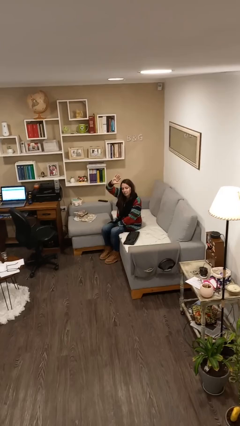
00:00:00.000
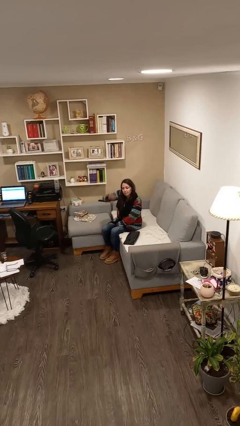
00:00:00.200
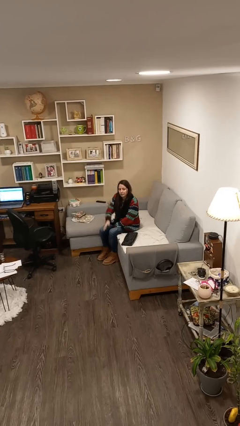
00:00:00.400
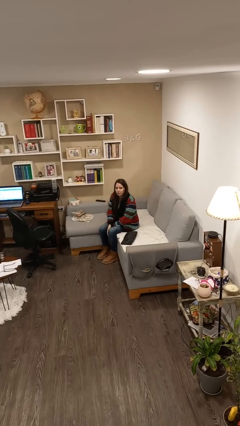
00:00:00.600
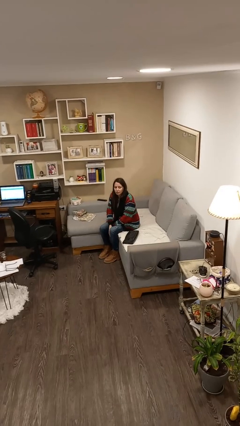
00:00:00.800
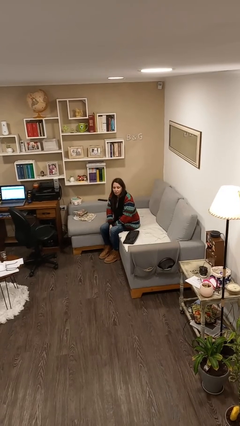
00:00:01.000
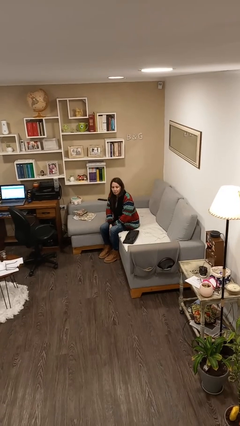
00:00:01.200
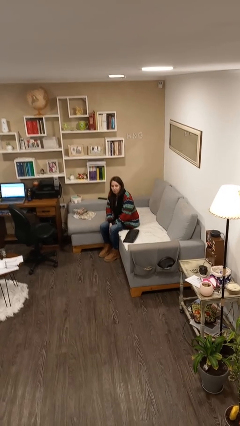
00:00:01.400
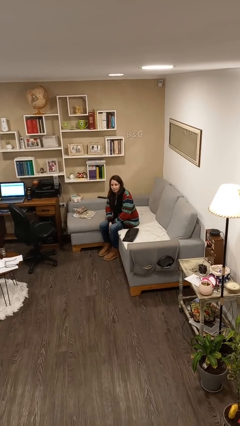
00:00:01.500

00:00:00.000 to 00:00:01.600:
person gestures lower hand

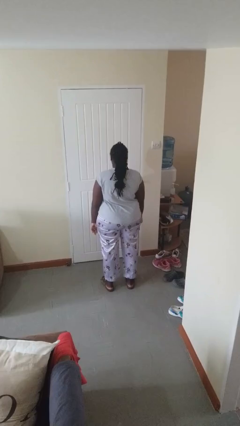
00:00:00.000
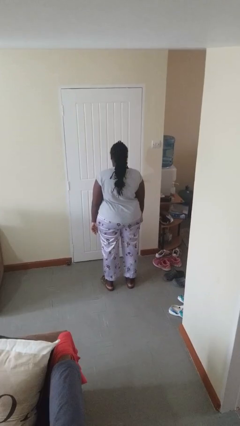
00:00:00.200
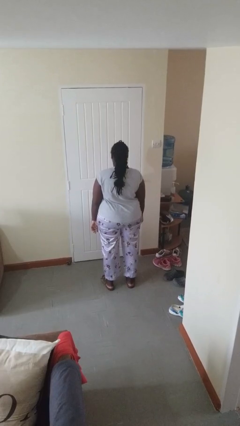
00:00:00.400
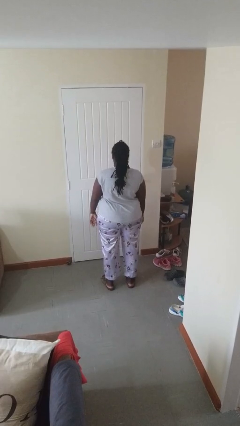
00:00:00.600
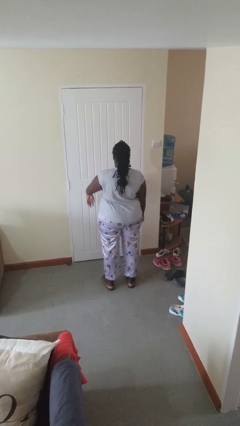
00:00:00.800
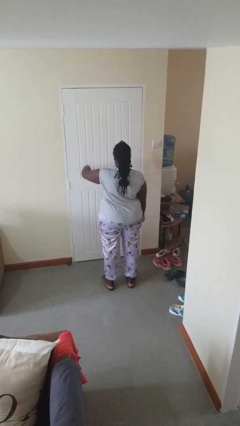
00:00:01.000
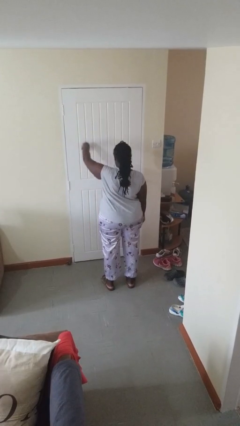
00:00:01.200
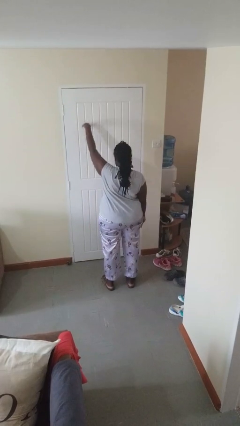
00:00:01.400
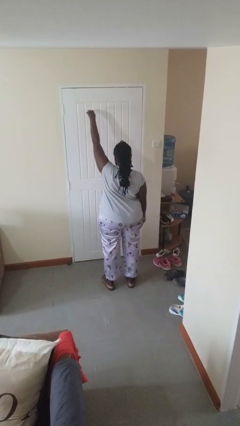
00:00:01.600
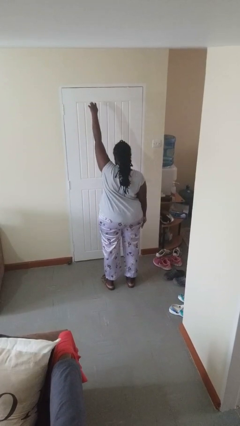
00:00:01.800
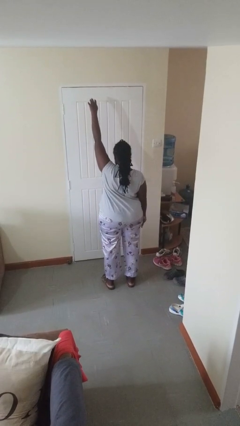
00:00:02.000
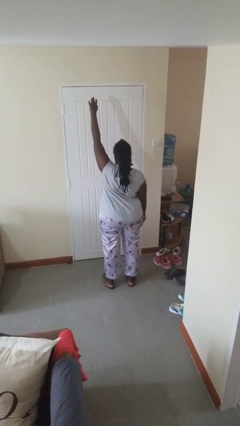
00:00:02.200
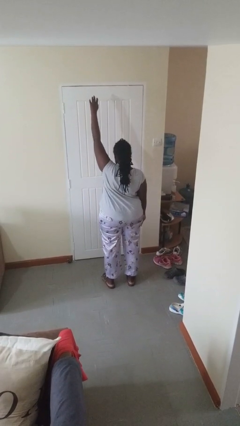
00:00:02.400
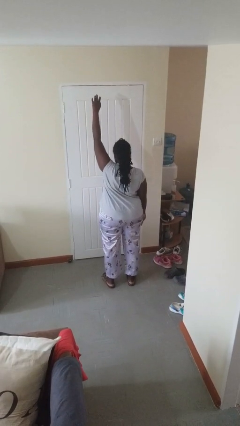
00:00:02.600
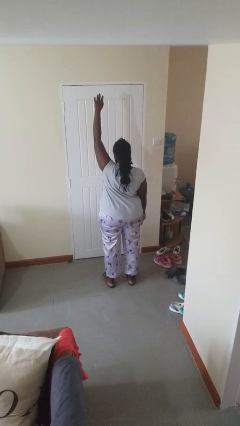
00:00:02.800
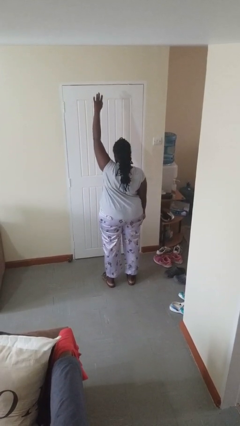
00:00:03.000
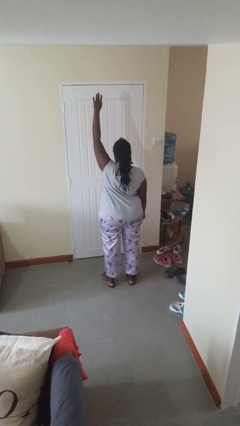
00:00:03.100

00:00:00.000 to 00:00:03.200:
person gestures swipe up

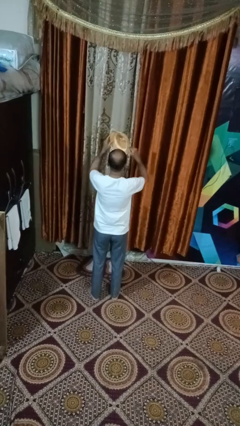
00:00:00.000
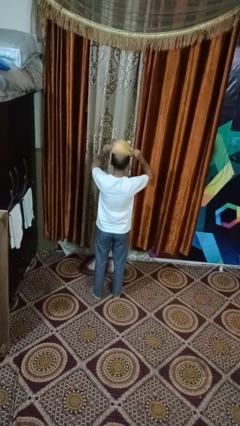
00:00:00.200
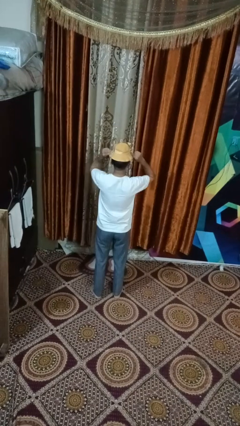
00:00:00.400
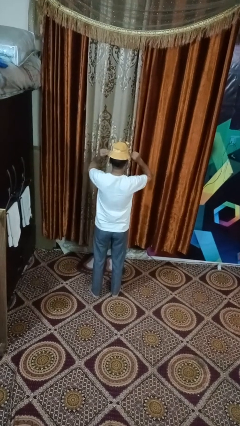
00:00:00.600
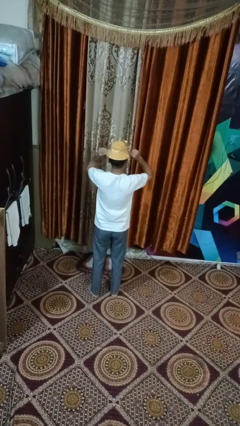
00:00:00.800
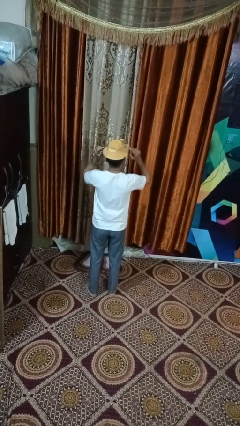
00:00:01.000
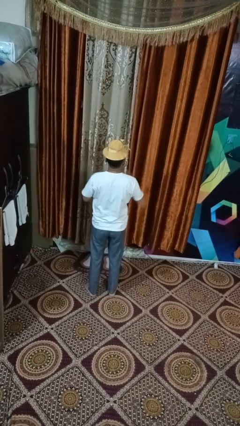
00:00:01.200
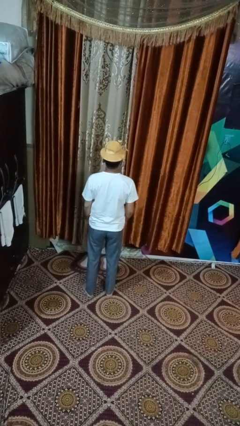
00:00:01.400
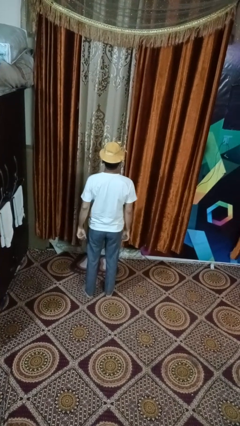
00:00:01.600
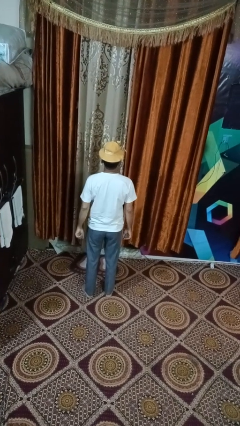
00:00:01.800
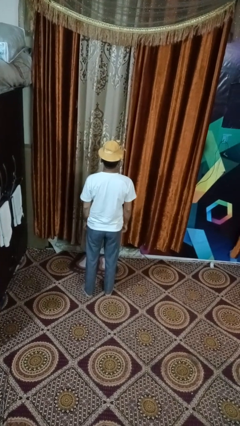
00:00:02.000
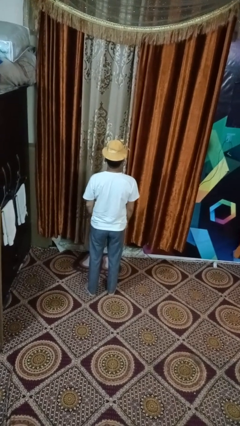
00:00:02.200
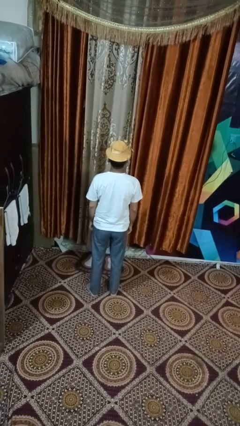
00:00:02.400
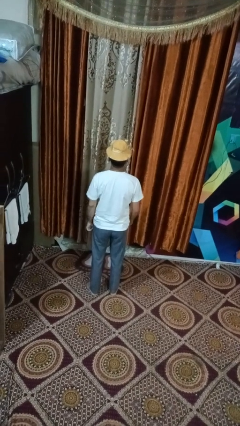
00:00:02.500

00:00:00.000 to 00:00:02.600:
person puts on hat

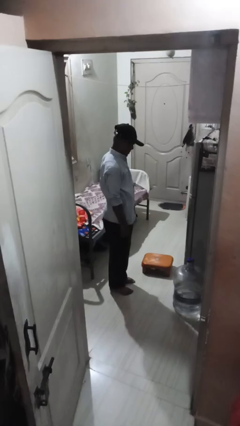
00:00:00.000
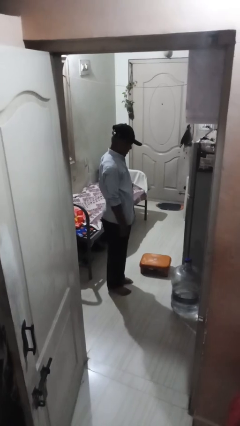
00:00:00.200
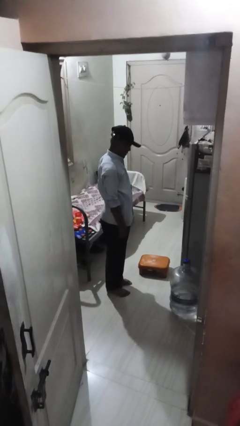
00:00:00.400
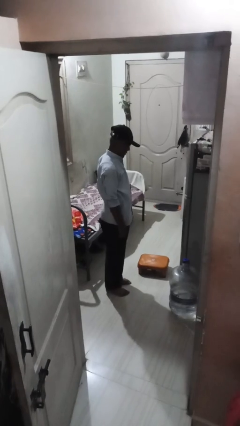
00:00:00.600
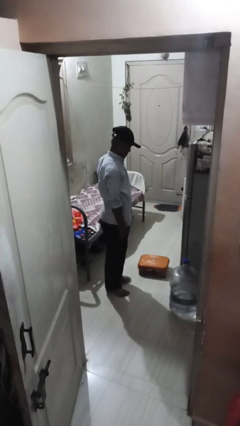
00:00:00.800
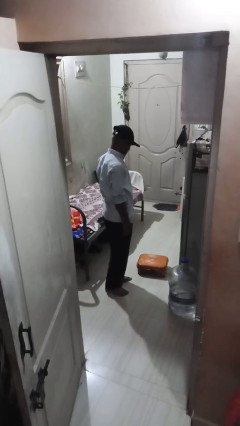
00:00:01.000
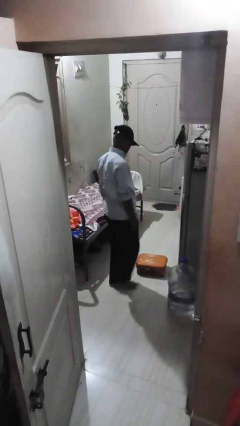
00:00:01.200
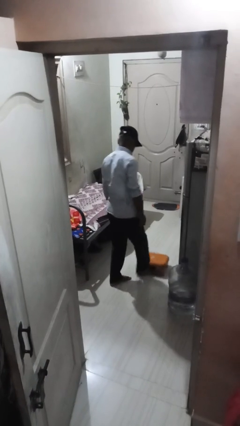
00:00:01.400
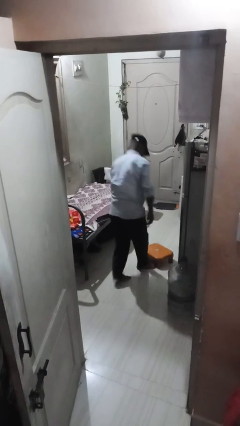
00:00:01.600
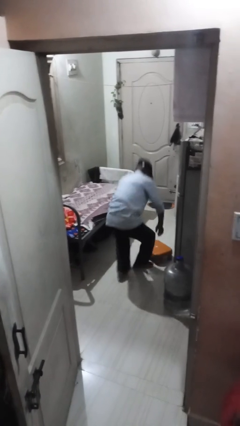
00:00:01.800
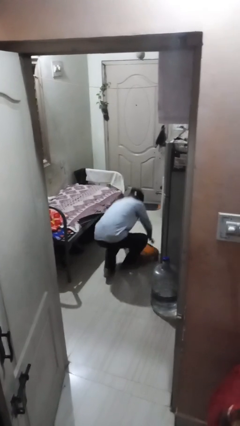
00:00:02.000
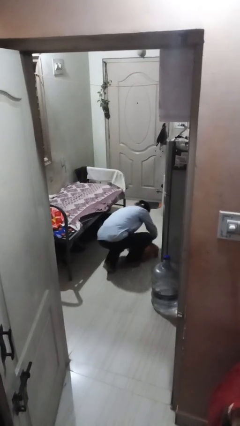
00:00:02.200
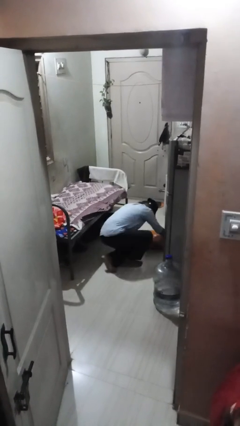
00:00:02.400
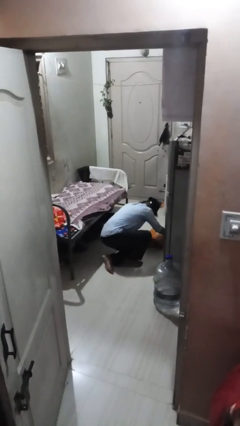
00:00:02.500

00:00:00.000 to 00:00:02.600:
person trips on object on floor

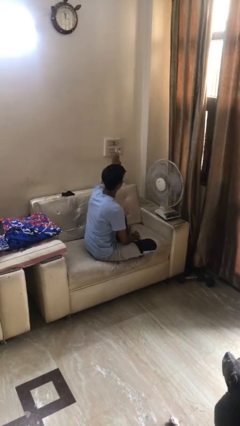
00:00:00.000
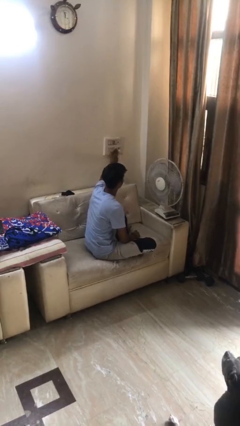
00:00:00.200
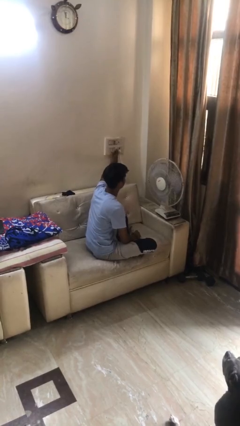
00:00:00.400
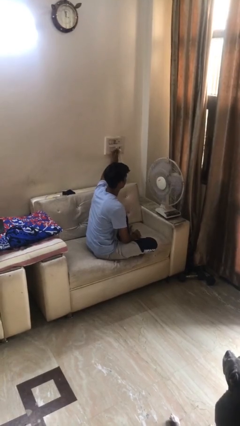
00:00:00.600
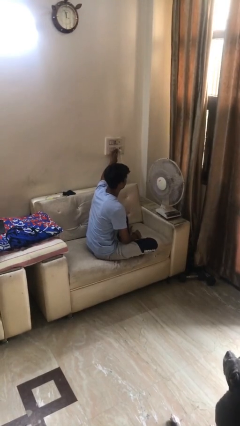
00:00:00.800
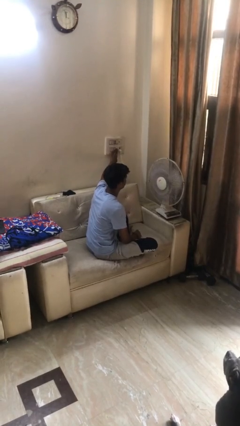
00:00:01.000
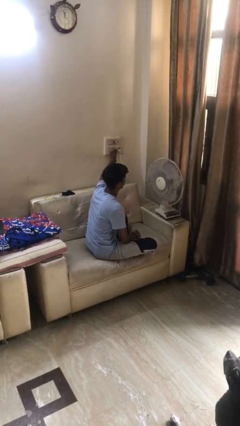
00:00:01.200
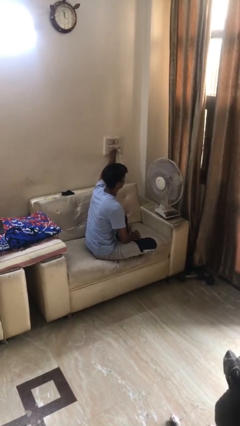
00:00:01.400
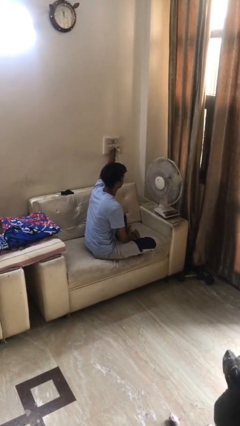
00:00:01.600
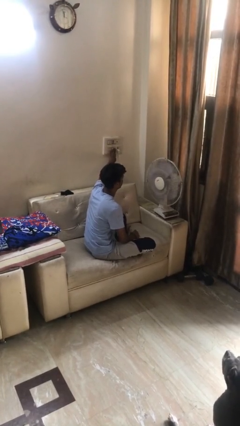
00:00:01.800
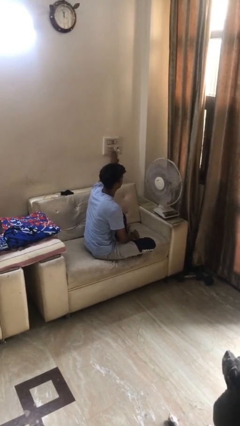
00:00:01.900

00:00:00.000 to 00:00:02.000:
person turns on fan

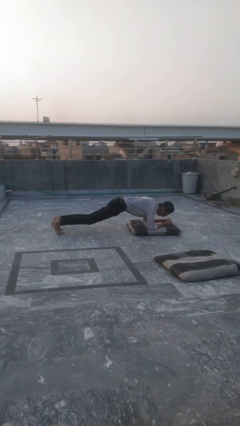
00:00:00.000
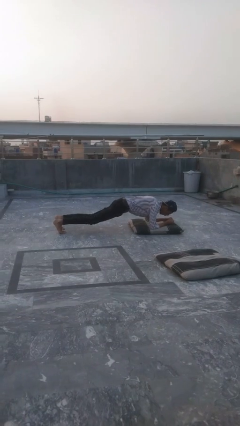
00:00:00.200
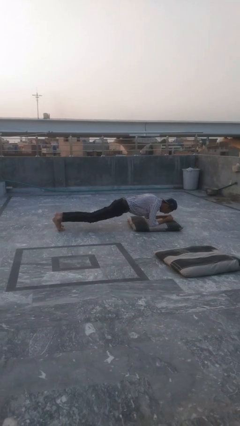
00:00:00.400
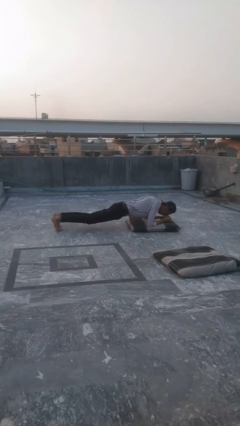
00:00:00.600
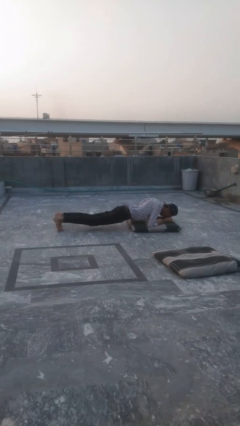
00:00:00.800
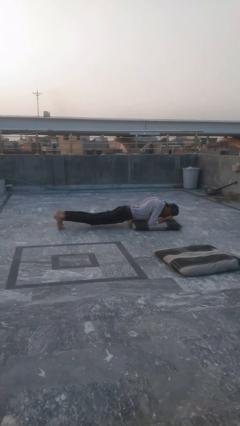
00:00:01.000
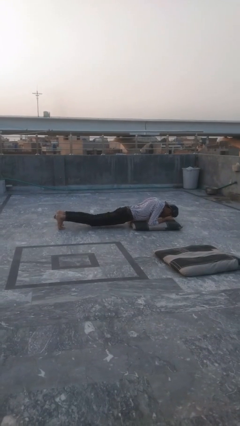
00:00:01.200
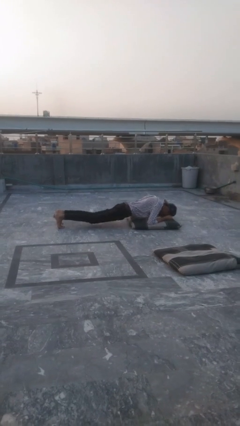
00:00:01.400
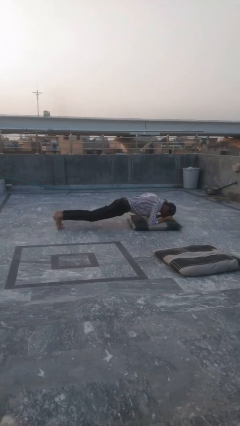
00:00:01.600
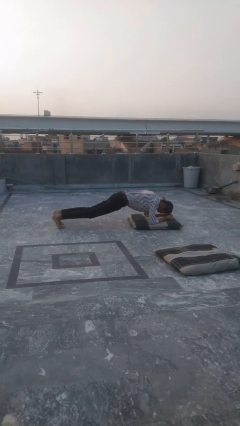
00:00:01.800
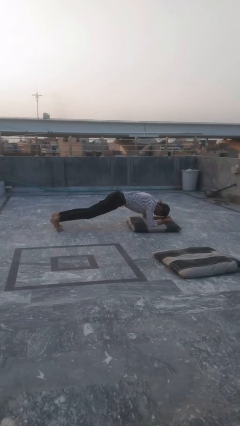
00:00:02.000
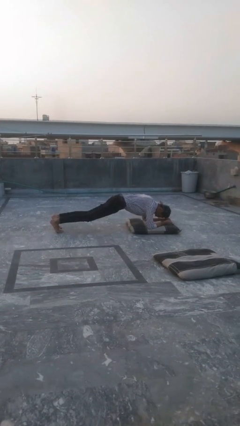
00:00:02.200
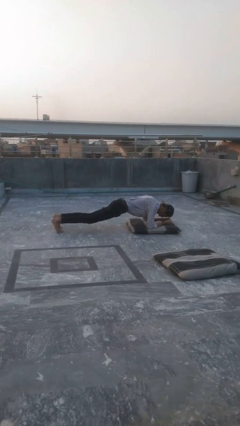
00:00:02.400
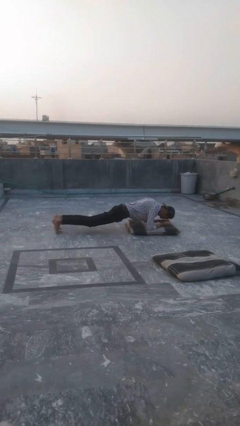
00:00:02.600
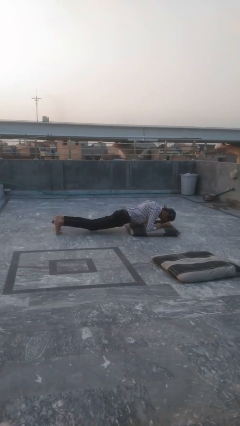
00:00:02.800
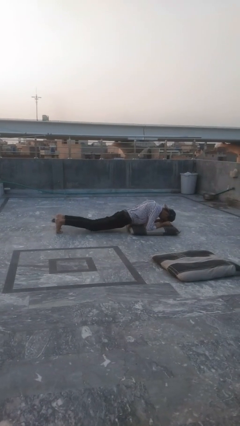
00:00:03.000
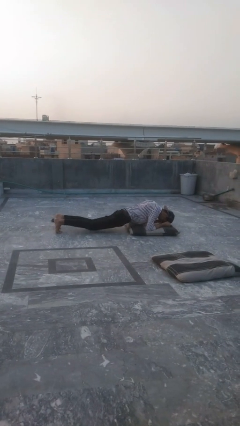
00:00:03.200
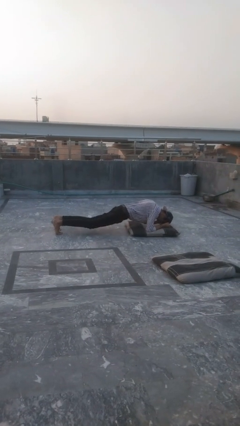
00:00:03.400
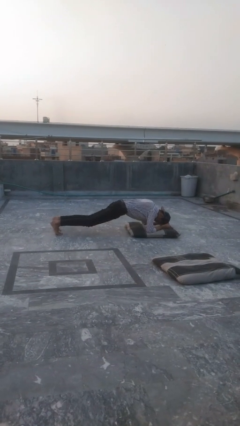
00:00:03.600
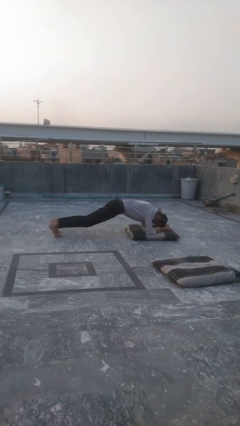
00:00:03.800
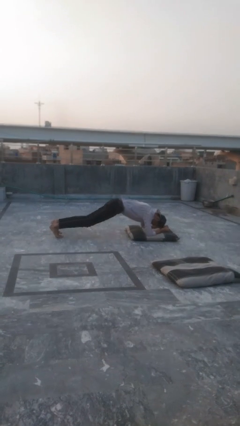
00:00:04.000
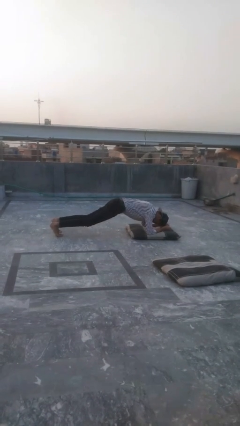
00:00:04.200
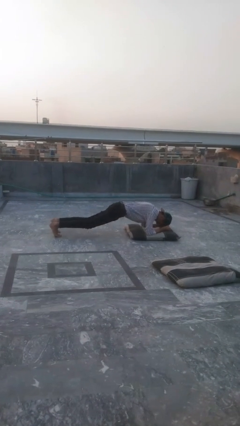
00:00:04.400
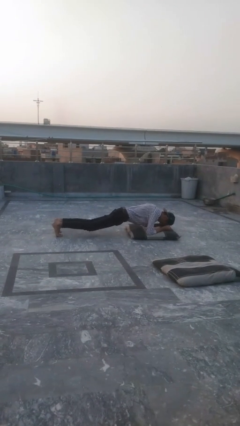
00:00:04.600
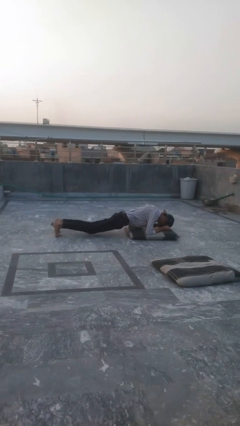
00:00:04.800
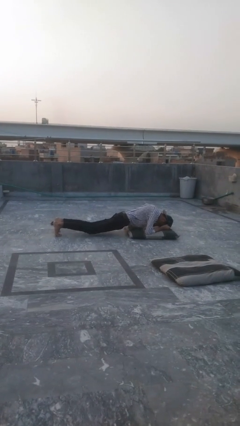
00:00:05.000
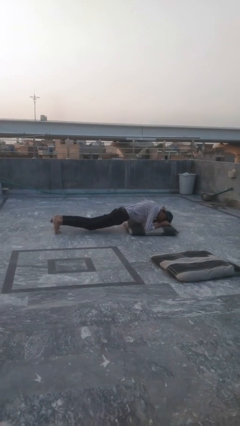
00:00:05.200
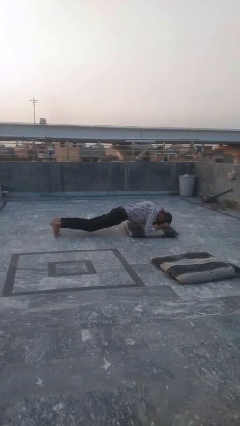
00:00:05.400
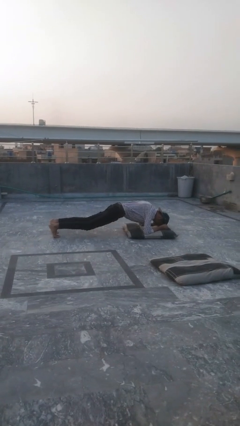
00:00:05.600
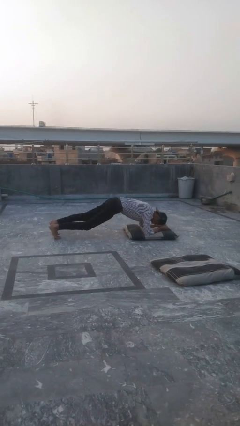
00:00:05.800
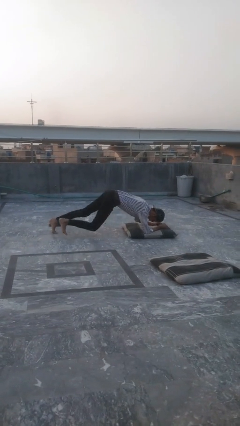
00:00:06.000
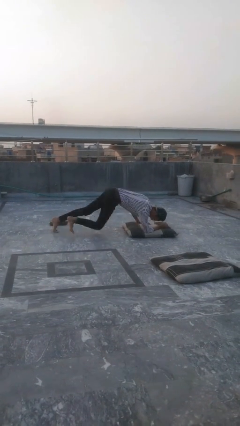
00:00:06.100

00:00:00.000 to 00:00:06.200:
person exercises with plank
